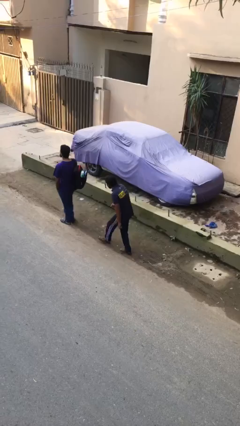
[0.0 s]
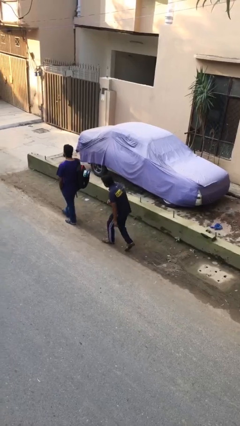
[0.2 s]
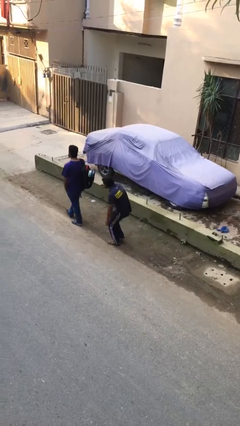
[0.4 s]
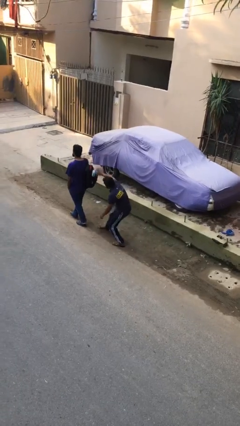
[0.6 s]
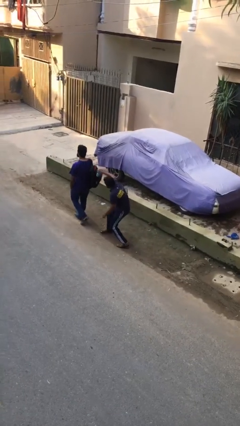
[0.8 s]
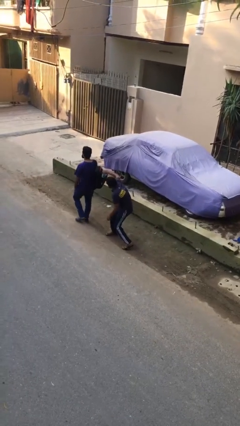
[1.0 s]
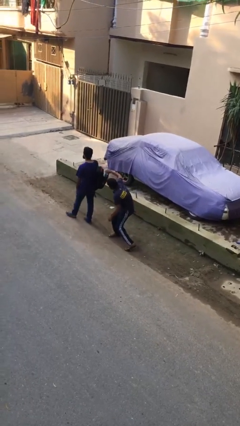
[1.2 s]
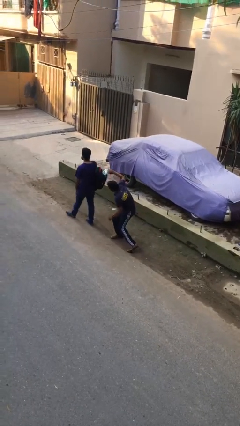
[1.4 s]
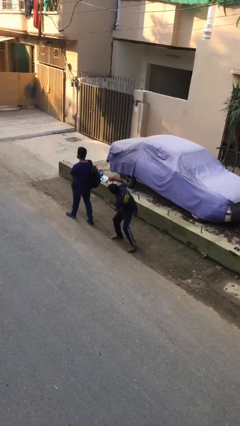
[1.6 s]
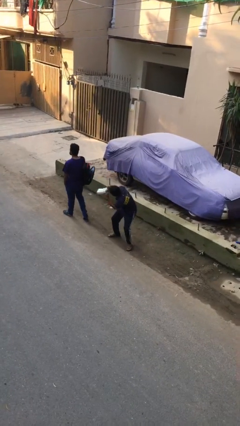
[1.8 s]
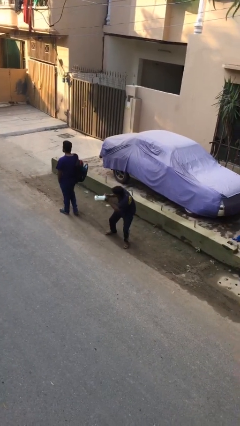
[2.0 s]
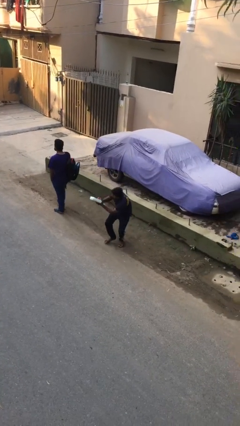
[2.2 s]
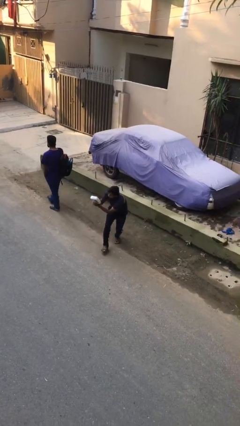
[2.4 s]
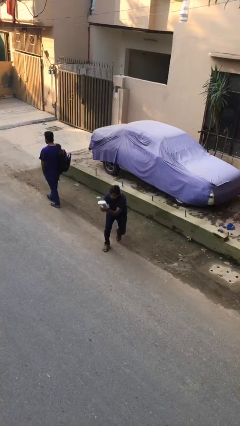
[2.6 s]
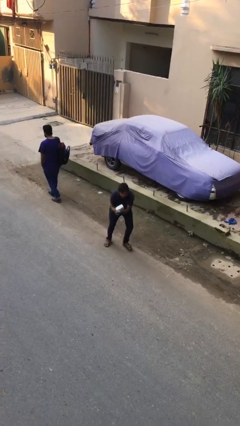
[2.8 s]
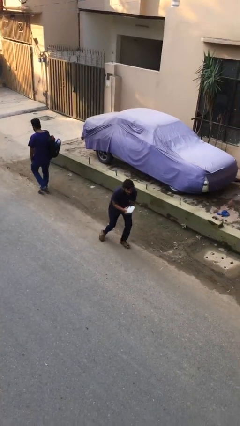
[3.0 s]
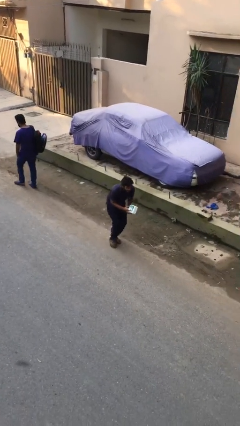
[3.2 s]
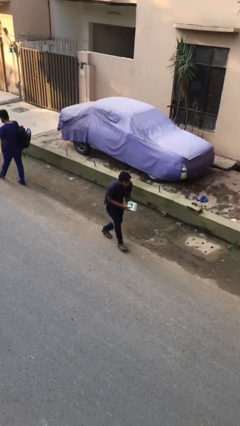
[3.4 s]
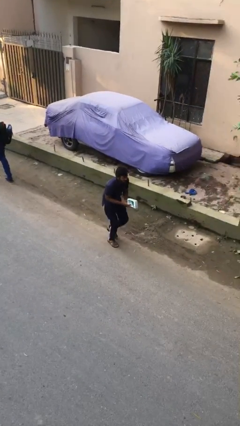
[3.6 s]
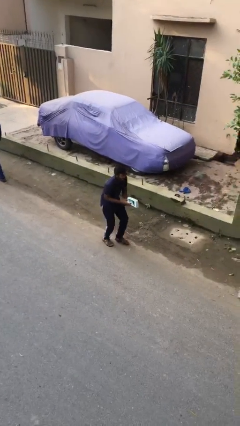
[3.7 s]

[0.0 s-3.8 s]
person steals object from person

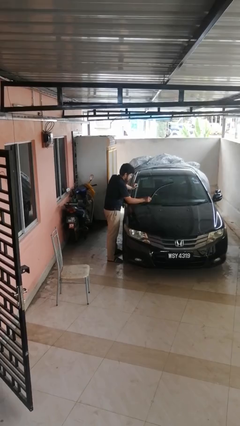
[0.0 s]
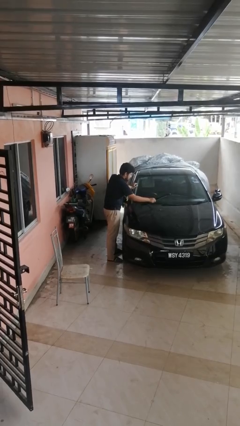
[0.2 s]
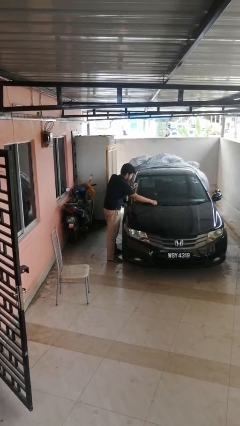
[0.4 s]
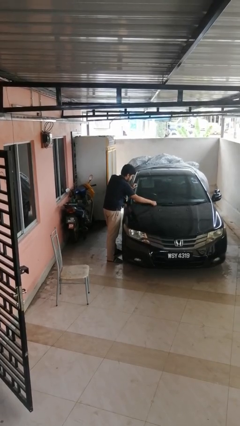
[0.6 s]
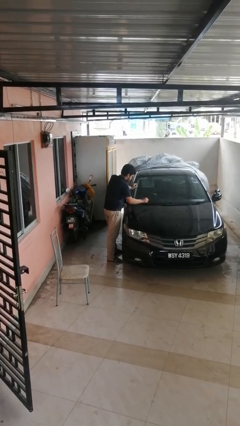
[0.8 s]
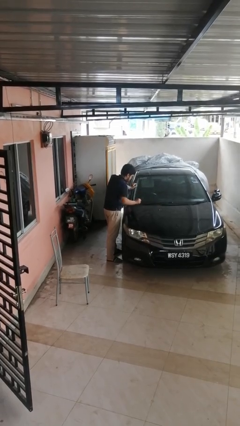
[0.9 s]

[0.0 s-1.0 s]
person flips down car wipers

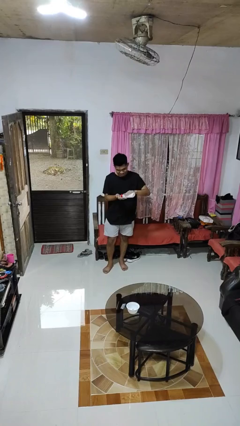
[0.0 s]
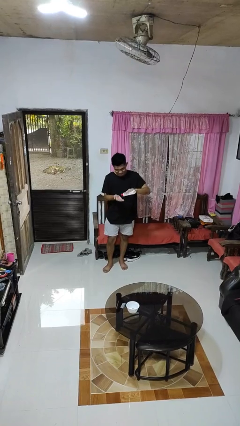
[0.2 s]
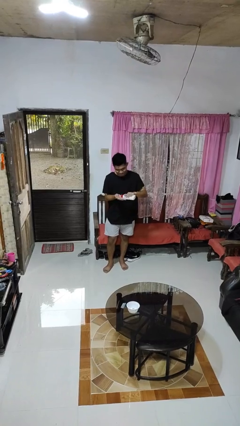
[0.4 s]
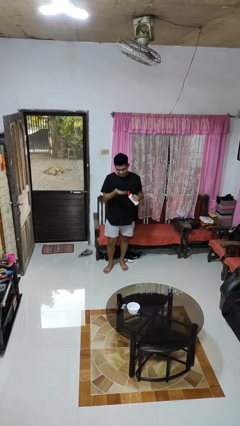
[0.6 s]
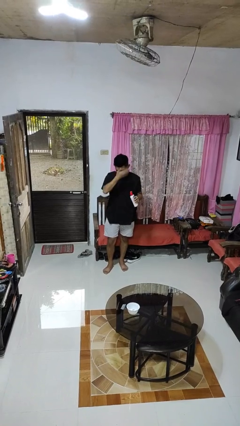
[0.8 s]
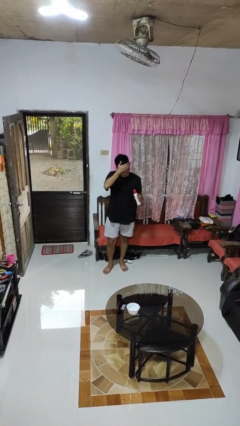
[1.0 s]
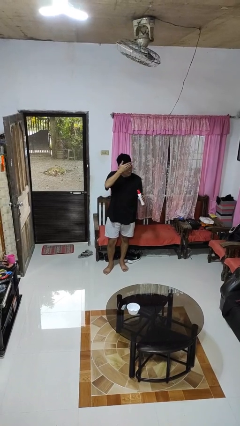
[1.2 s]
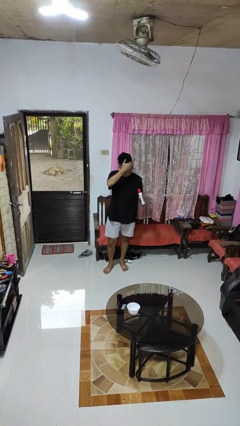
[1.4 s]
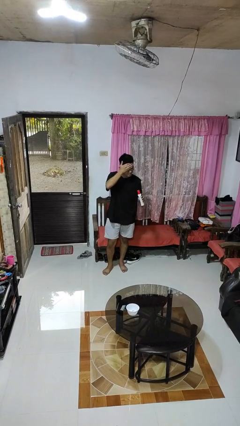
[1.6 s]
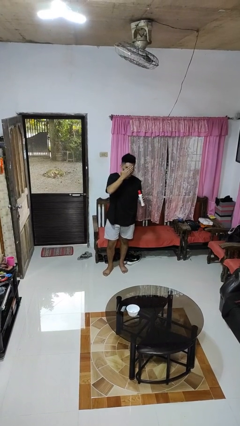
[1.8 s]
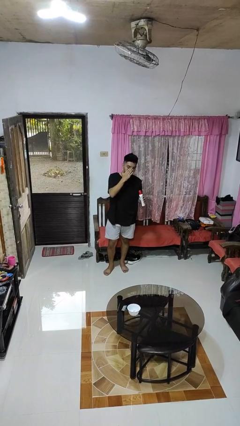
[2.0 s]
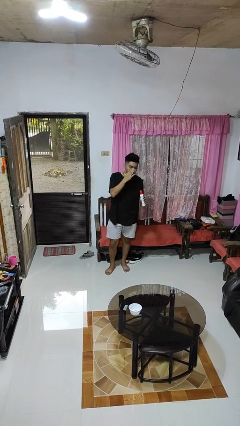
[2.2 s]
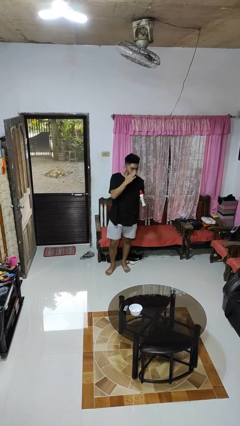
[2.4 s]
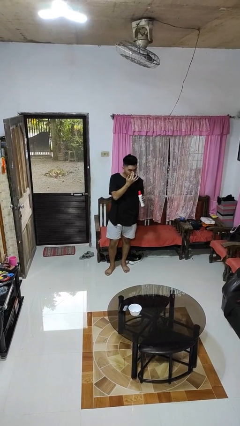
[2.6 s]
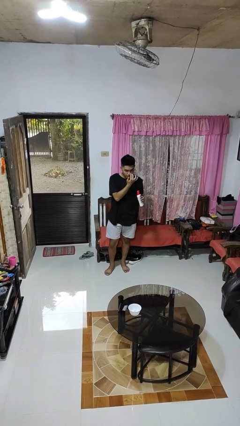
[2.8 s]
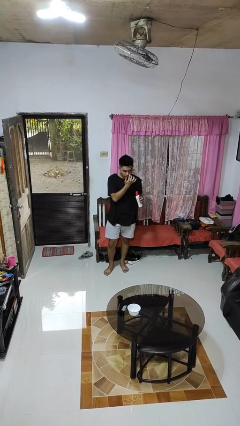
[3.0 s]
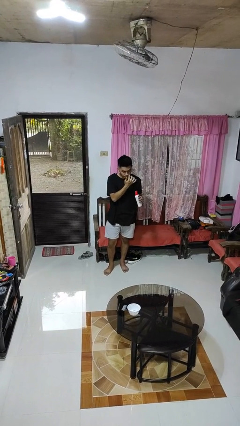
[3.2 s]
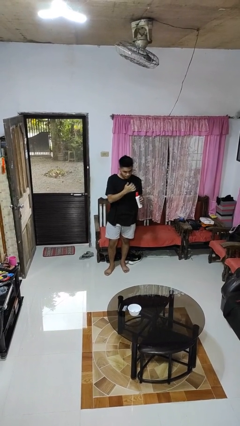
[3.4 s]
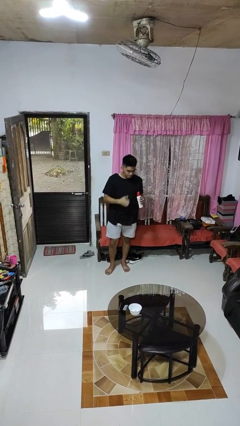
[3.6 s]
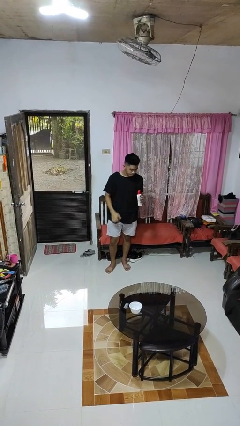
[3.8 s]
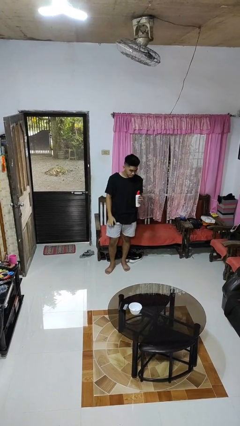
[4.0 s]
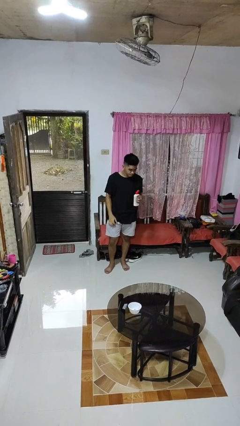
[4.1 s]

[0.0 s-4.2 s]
person applies facial moisturizer

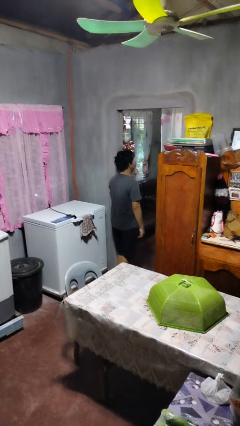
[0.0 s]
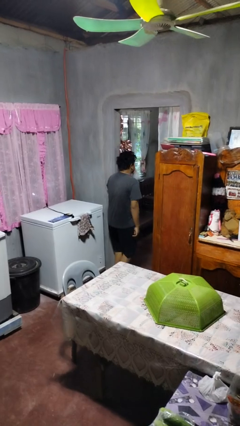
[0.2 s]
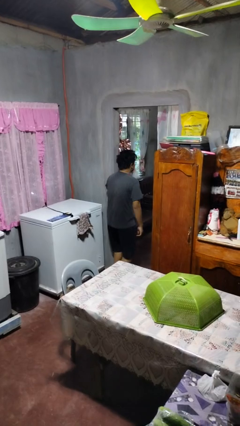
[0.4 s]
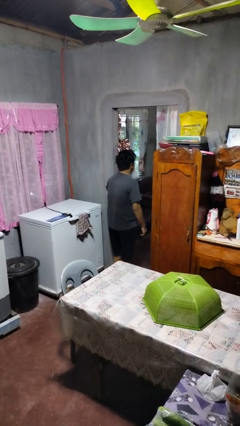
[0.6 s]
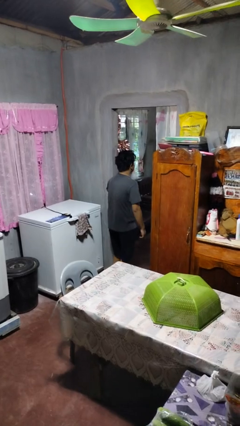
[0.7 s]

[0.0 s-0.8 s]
person bumps into wall

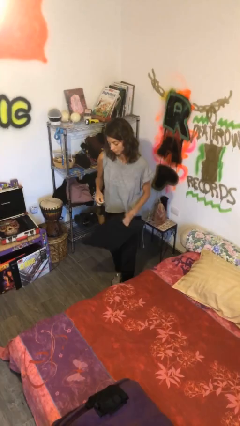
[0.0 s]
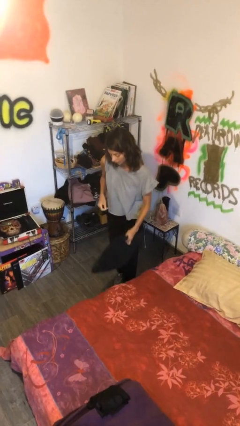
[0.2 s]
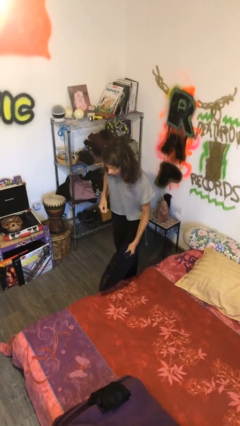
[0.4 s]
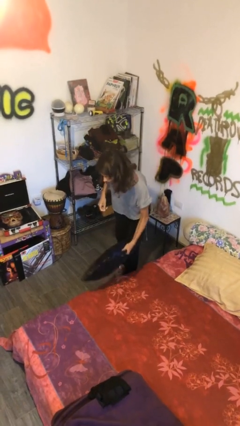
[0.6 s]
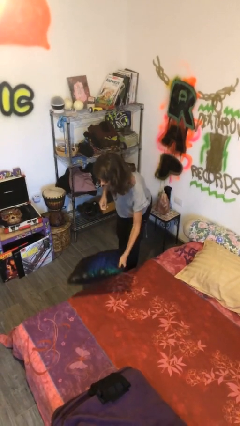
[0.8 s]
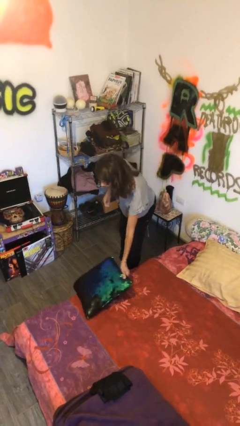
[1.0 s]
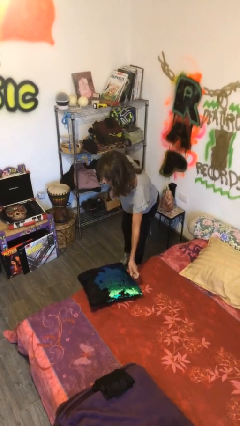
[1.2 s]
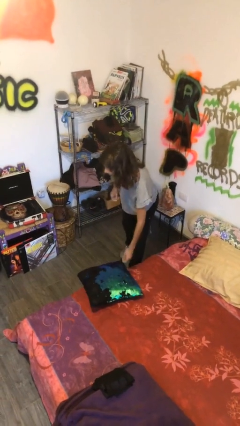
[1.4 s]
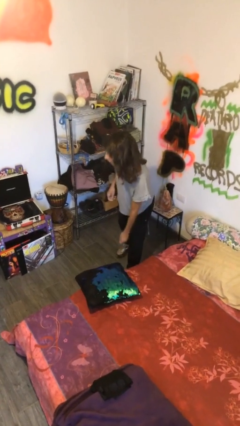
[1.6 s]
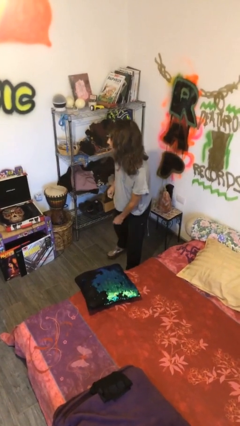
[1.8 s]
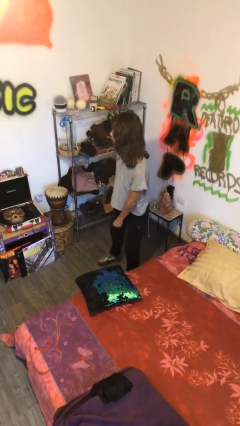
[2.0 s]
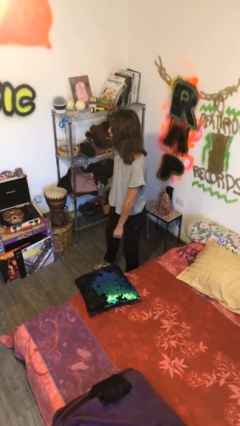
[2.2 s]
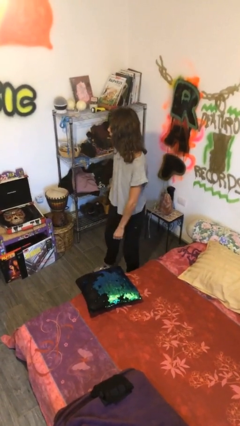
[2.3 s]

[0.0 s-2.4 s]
person puts down object on bed

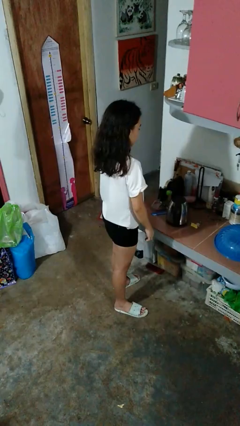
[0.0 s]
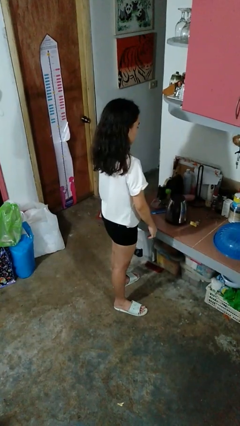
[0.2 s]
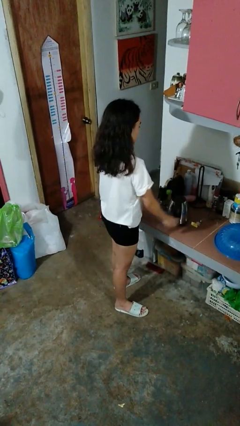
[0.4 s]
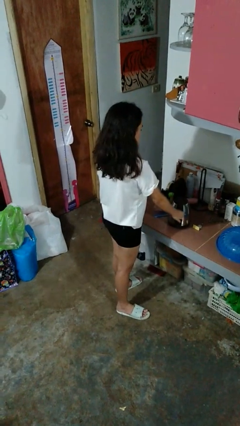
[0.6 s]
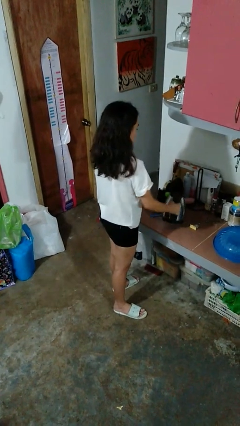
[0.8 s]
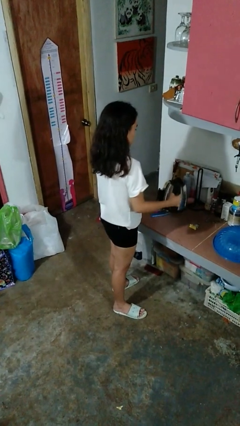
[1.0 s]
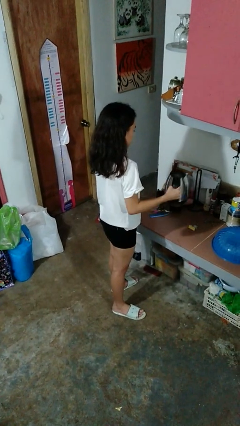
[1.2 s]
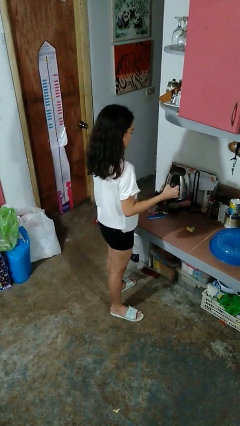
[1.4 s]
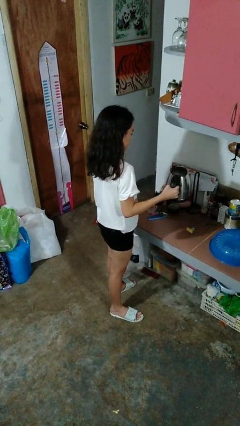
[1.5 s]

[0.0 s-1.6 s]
person picks up object from countertop

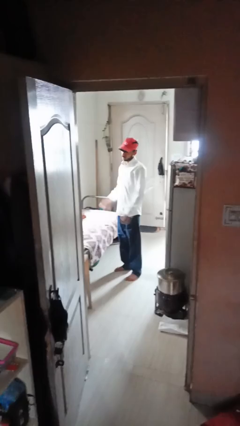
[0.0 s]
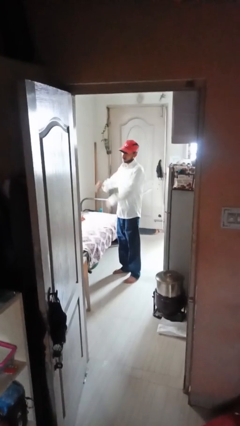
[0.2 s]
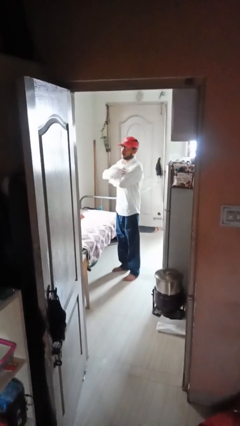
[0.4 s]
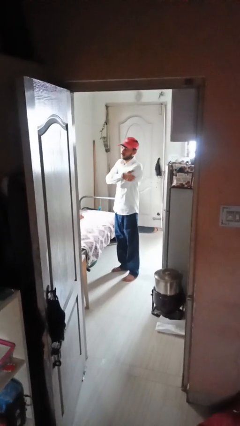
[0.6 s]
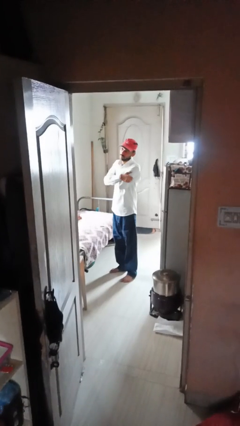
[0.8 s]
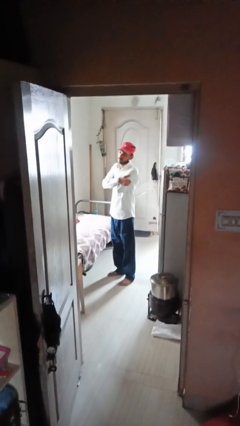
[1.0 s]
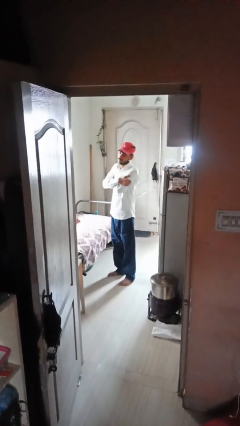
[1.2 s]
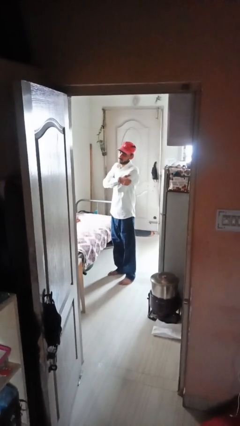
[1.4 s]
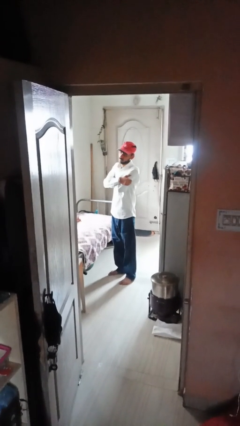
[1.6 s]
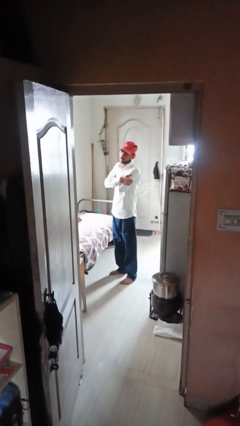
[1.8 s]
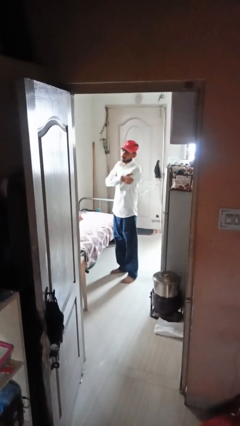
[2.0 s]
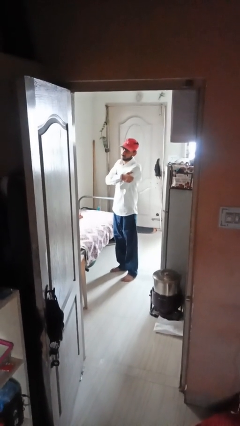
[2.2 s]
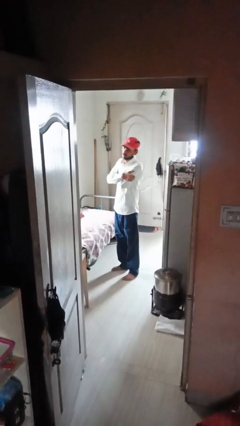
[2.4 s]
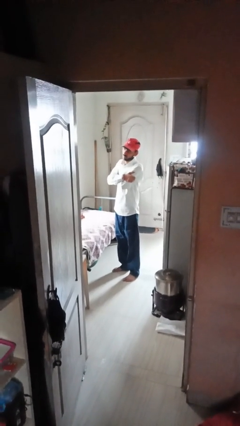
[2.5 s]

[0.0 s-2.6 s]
person crosses arms

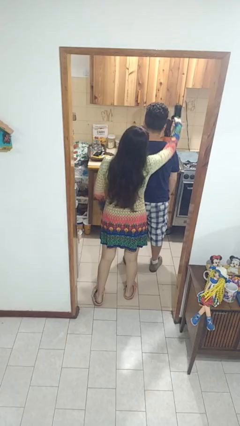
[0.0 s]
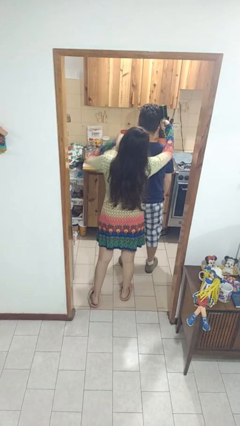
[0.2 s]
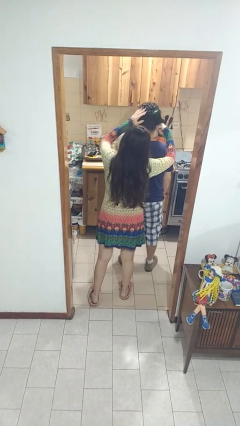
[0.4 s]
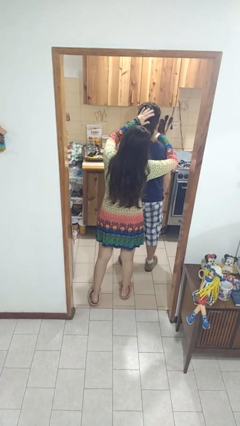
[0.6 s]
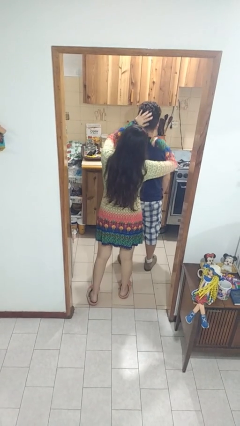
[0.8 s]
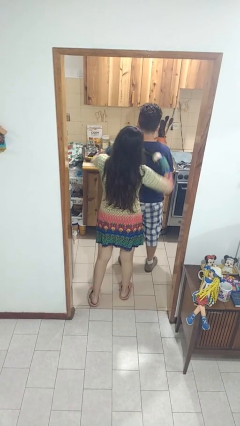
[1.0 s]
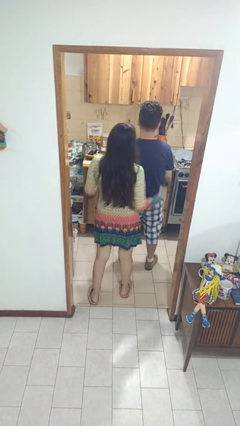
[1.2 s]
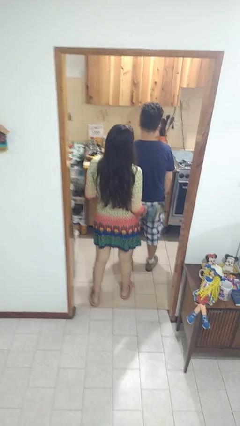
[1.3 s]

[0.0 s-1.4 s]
person brushes hair of person
